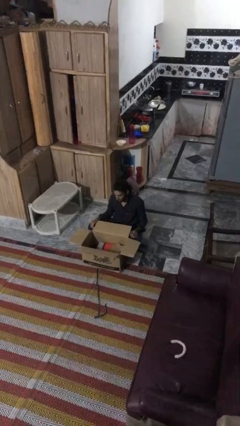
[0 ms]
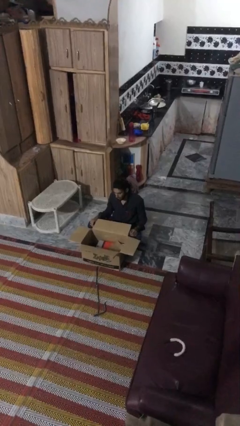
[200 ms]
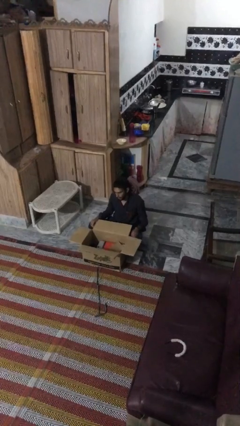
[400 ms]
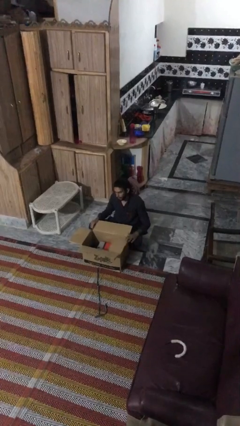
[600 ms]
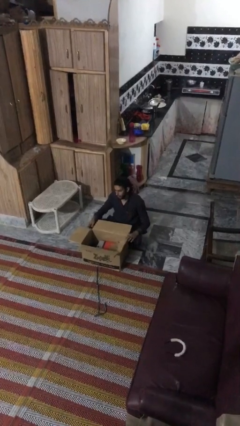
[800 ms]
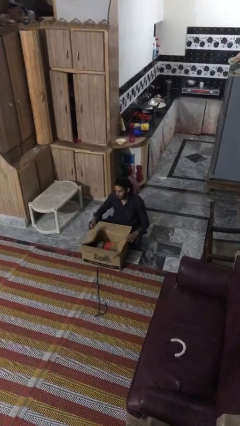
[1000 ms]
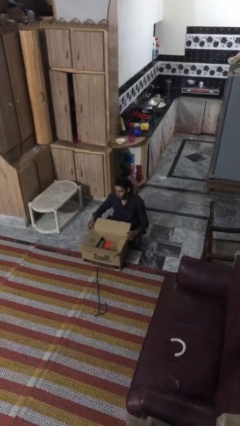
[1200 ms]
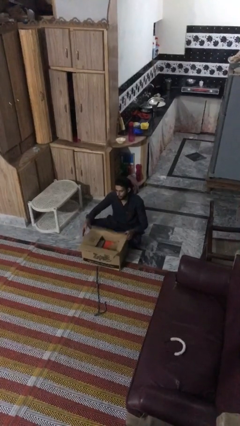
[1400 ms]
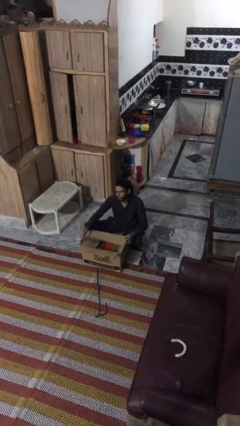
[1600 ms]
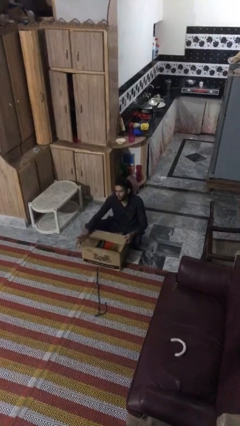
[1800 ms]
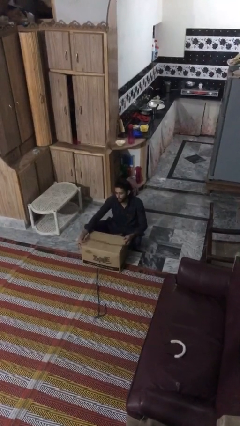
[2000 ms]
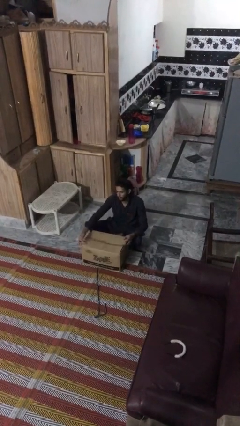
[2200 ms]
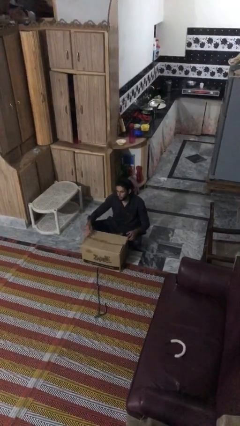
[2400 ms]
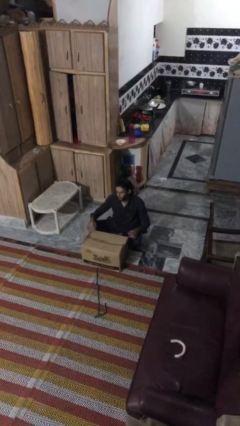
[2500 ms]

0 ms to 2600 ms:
person closes box

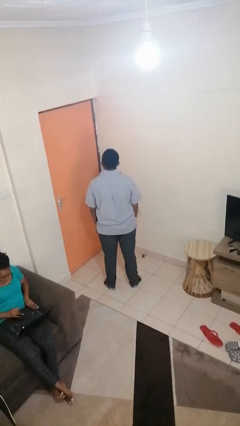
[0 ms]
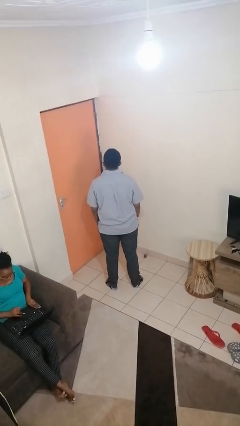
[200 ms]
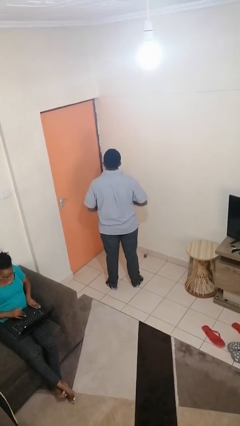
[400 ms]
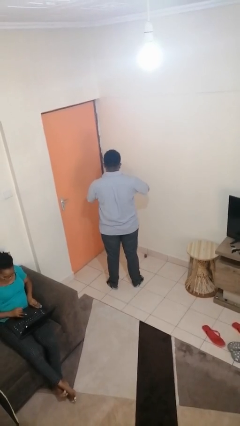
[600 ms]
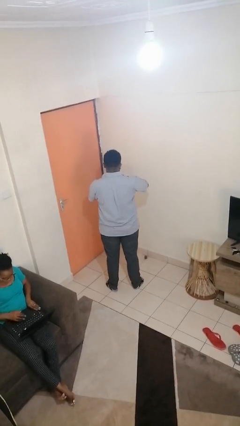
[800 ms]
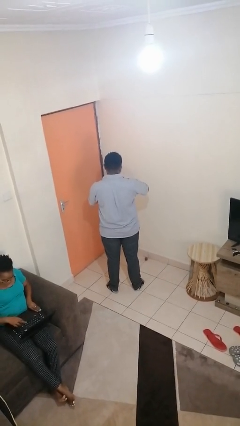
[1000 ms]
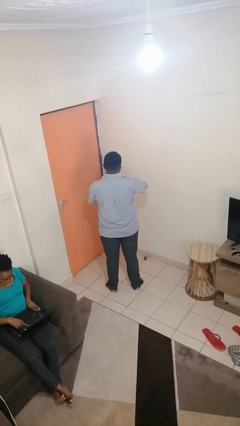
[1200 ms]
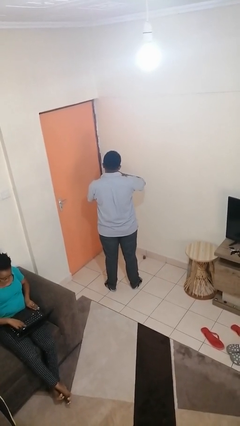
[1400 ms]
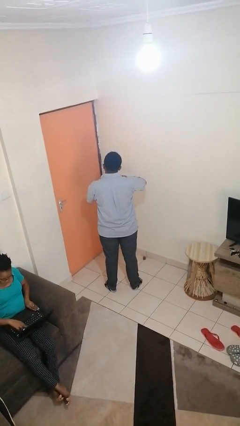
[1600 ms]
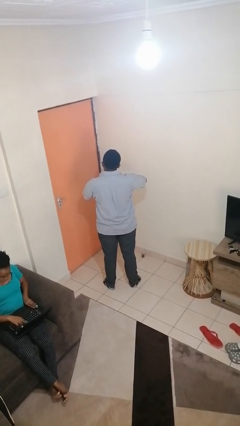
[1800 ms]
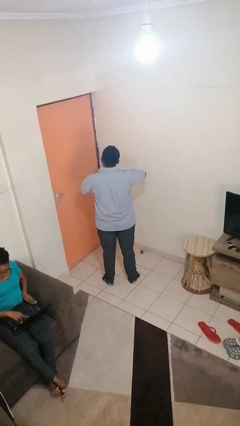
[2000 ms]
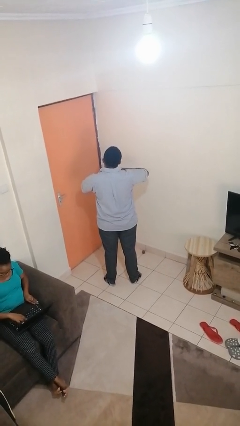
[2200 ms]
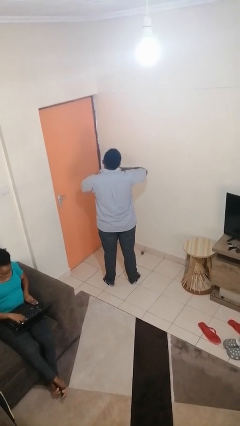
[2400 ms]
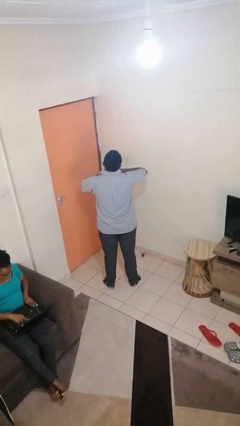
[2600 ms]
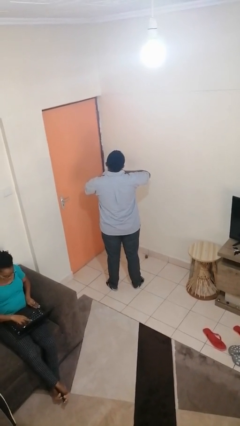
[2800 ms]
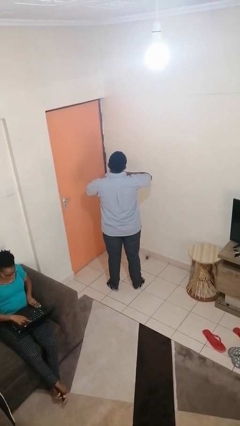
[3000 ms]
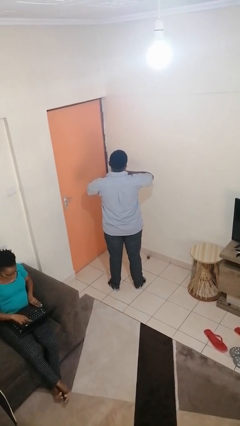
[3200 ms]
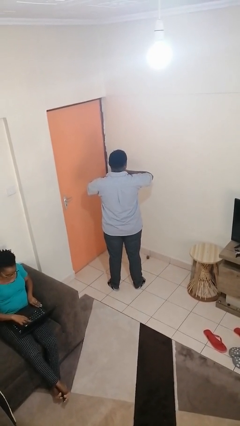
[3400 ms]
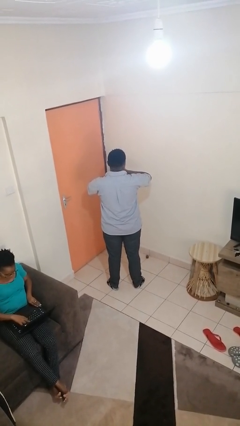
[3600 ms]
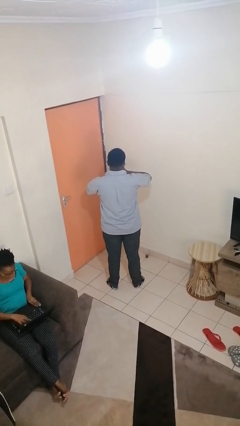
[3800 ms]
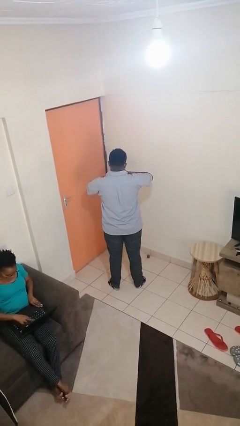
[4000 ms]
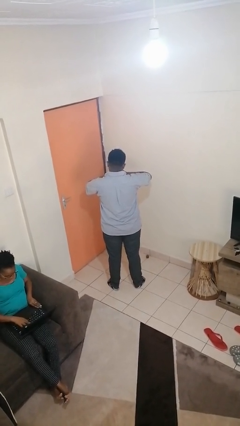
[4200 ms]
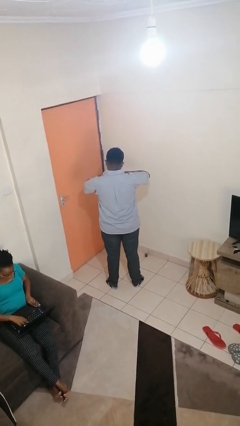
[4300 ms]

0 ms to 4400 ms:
person cracks knuckles

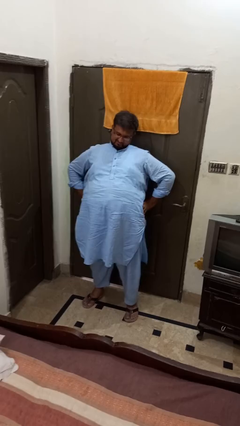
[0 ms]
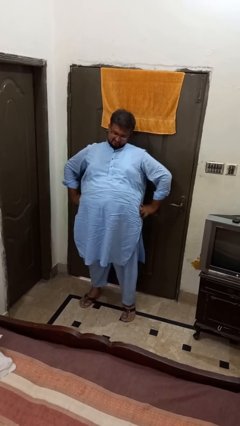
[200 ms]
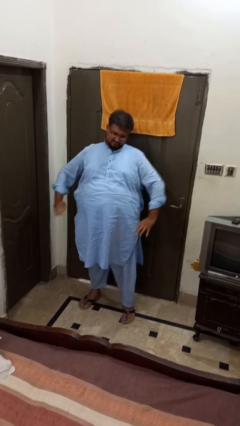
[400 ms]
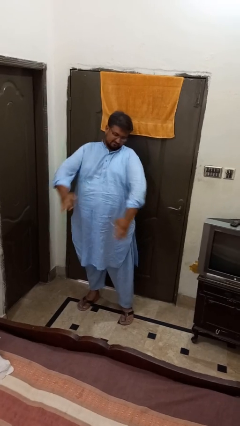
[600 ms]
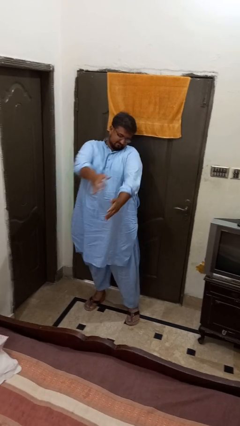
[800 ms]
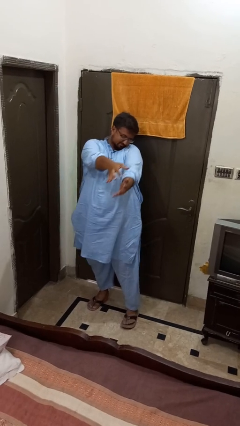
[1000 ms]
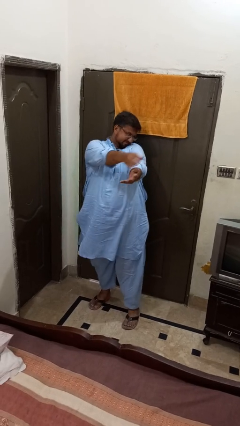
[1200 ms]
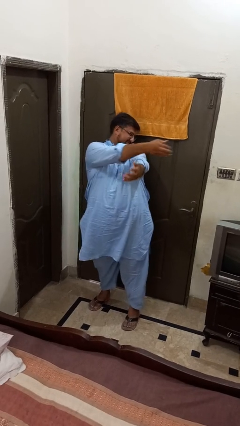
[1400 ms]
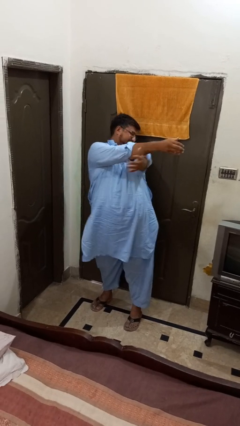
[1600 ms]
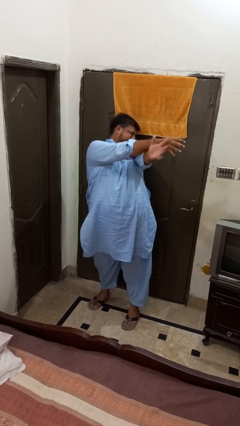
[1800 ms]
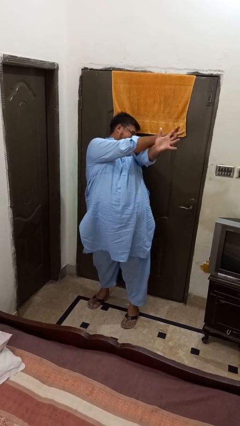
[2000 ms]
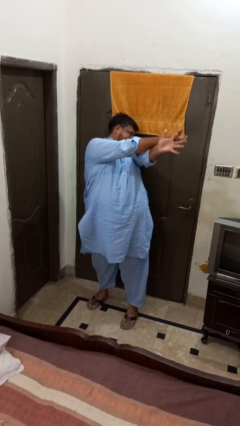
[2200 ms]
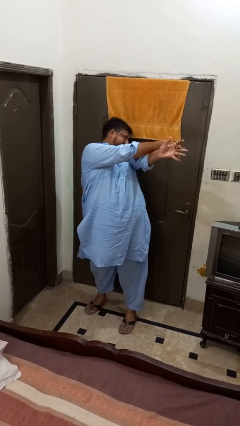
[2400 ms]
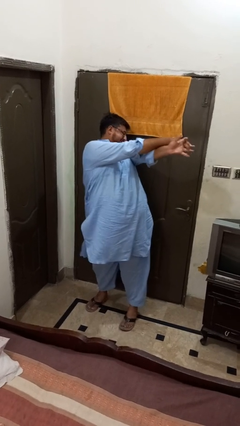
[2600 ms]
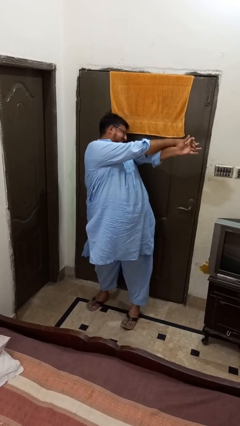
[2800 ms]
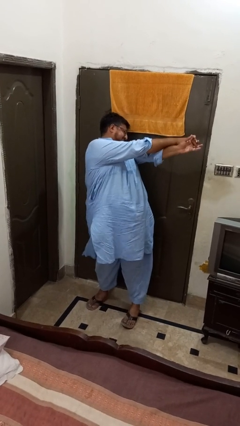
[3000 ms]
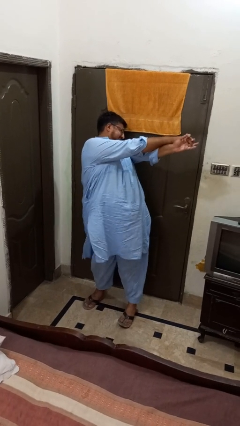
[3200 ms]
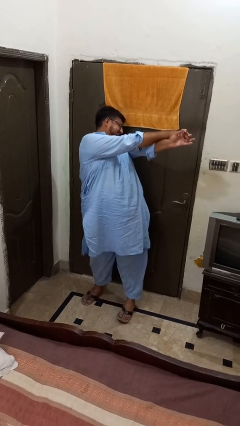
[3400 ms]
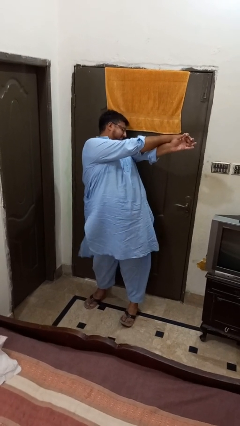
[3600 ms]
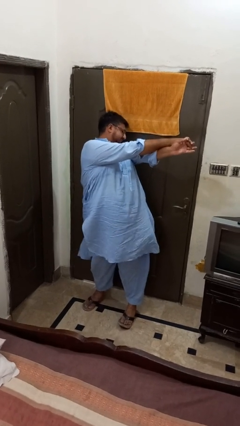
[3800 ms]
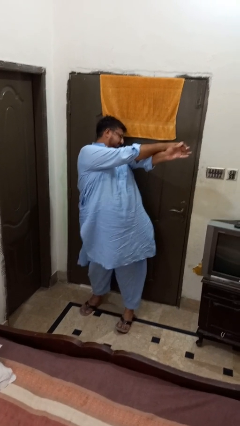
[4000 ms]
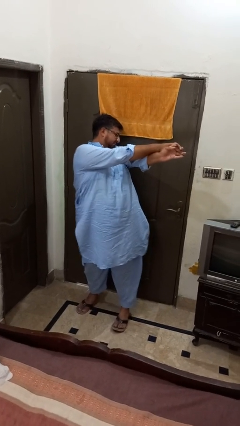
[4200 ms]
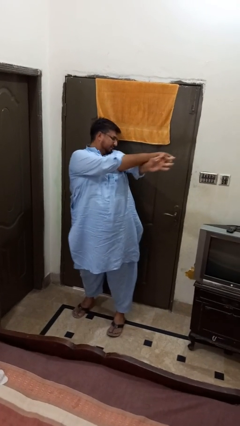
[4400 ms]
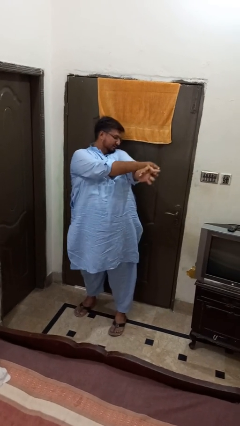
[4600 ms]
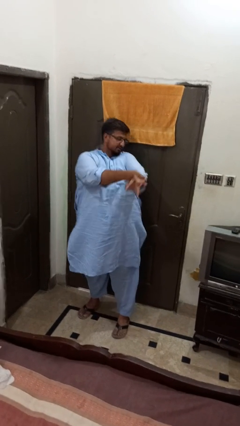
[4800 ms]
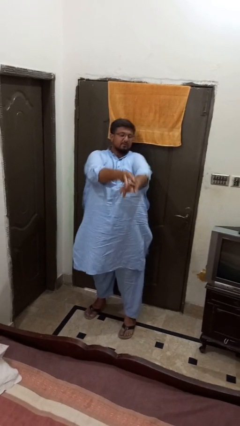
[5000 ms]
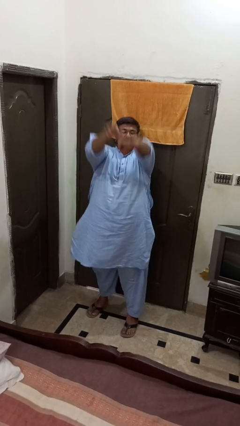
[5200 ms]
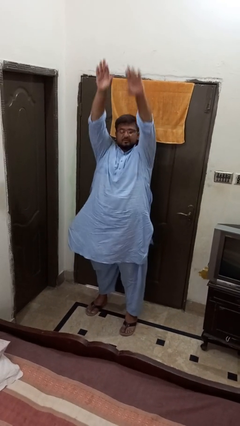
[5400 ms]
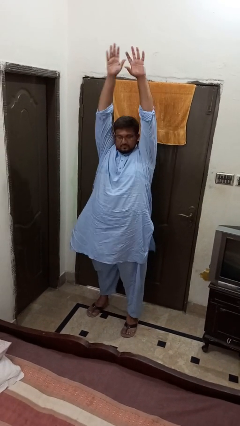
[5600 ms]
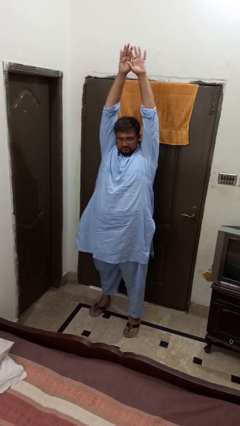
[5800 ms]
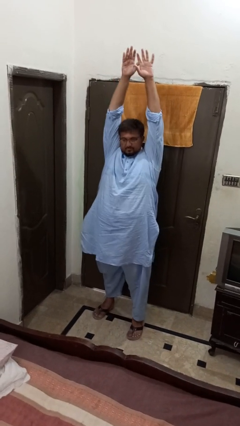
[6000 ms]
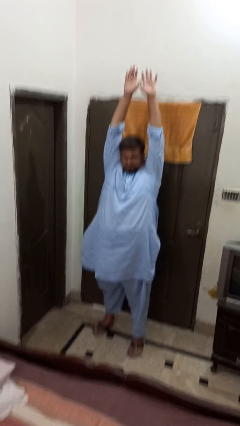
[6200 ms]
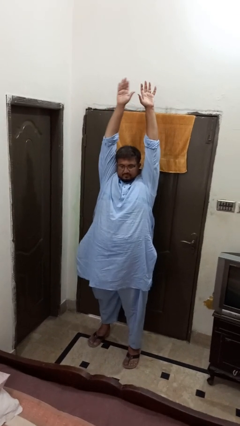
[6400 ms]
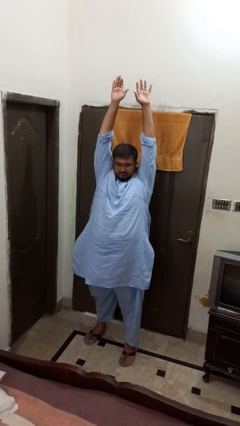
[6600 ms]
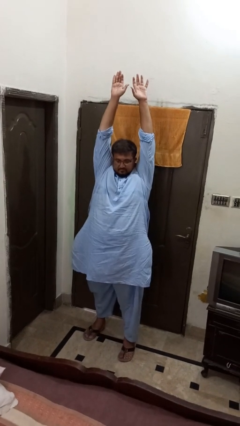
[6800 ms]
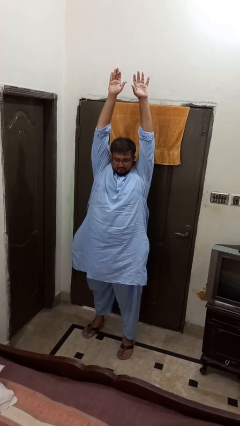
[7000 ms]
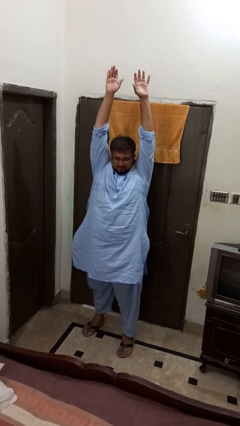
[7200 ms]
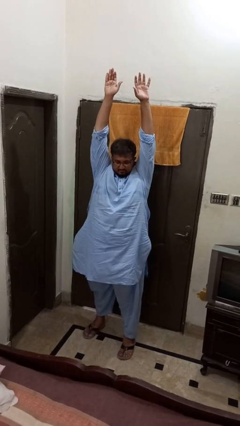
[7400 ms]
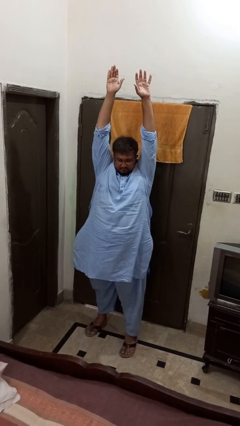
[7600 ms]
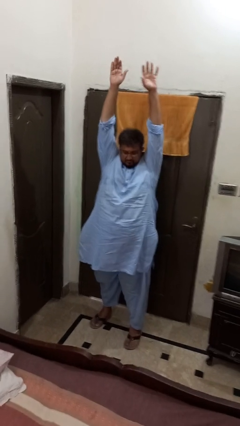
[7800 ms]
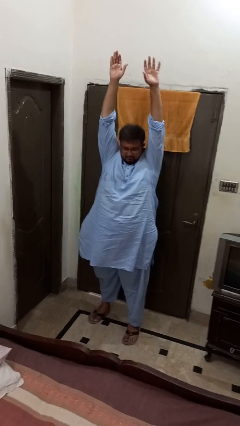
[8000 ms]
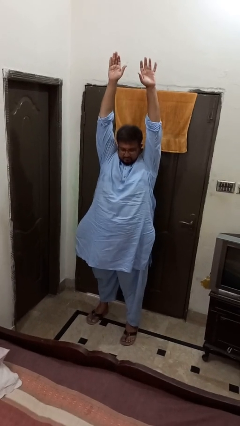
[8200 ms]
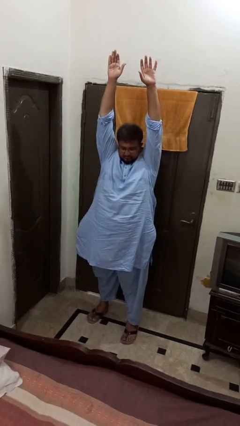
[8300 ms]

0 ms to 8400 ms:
person stretches arms to side

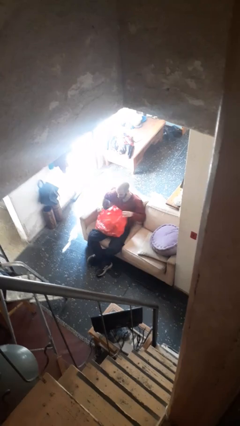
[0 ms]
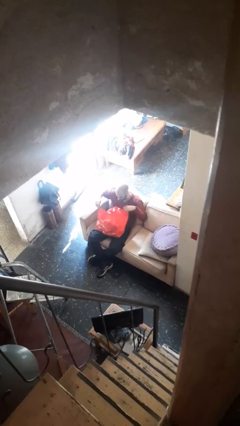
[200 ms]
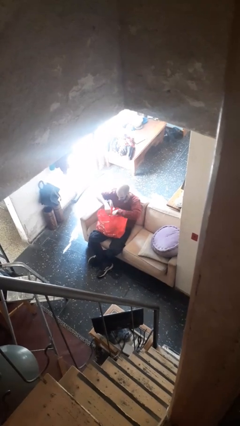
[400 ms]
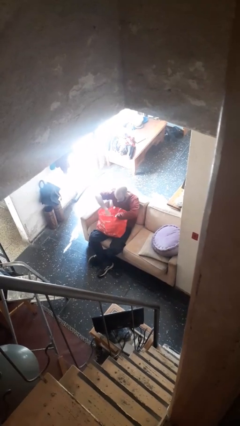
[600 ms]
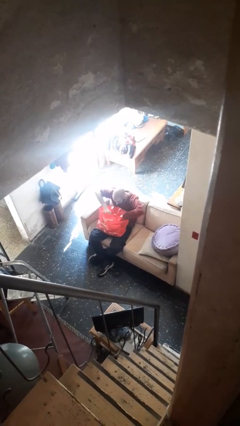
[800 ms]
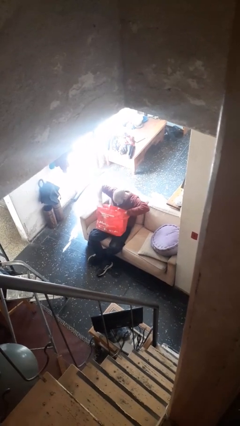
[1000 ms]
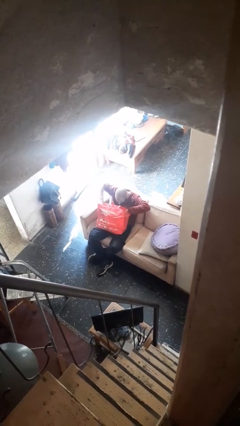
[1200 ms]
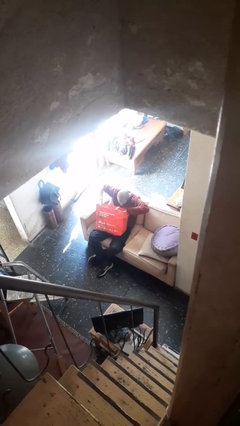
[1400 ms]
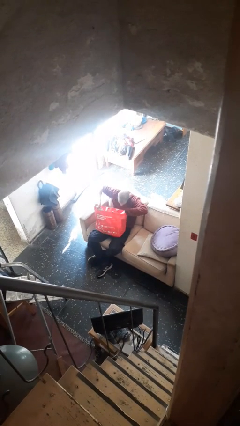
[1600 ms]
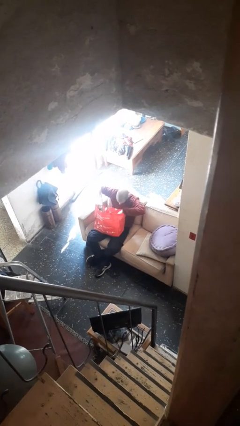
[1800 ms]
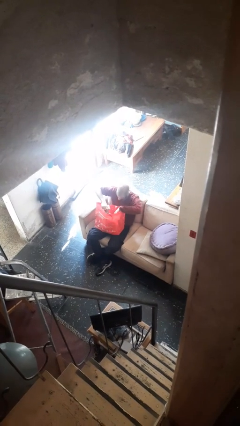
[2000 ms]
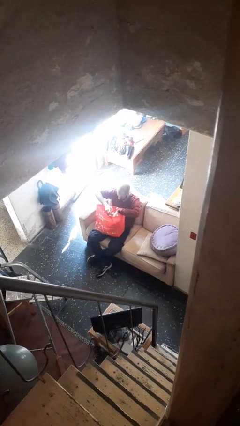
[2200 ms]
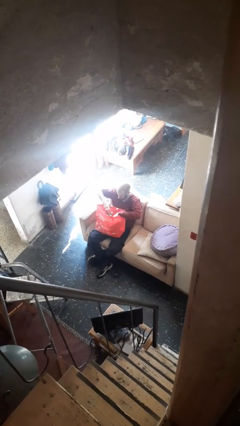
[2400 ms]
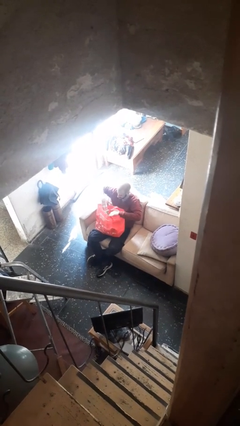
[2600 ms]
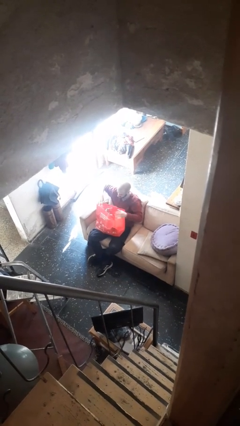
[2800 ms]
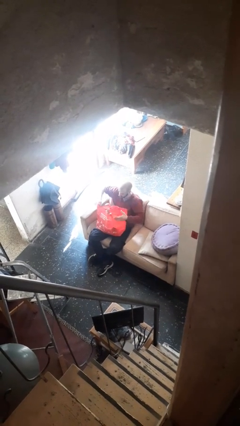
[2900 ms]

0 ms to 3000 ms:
person searches in bag

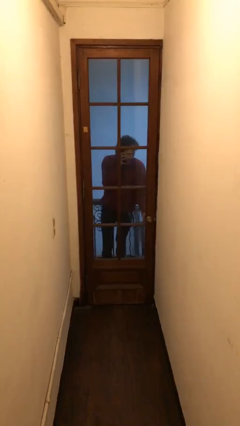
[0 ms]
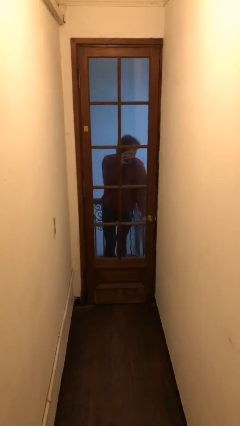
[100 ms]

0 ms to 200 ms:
person opens facility door
